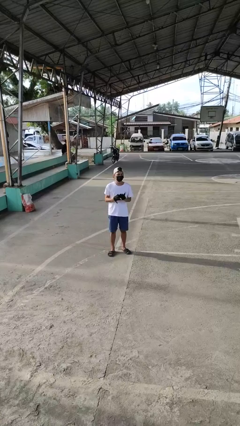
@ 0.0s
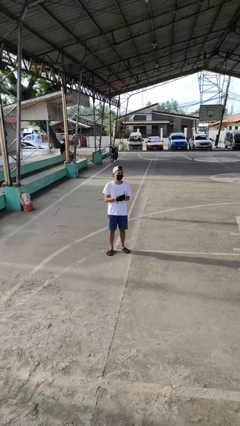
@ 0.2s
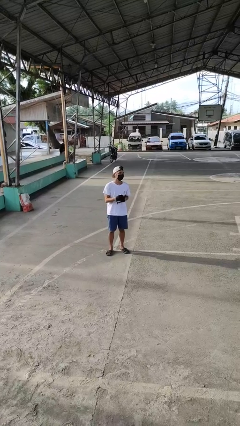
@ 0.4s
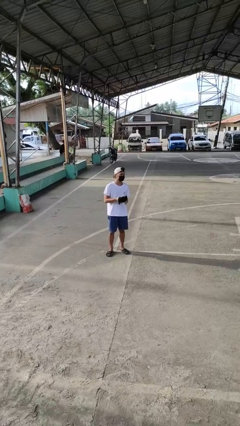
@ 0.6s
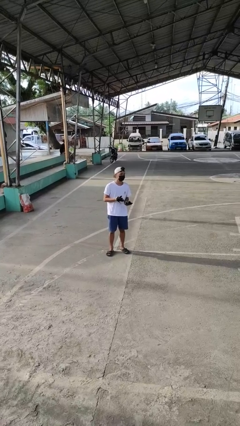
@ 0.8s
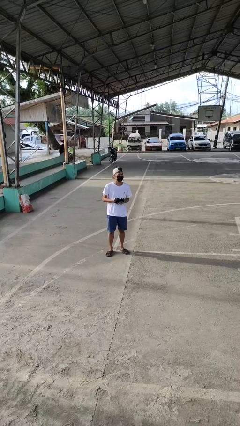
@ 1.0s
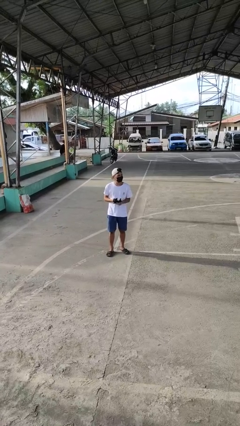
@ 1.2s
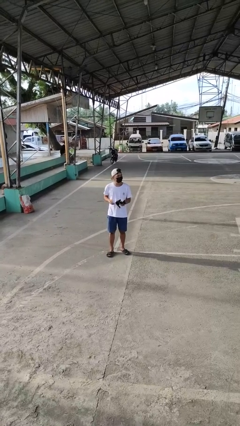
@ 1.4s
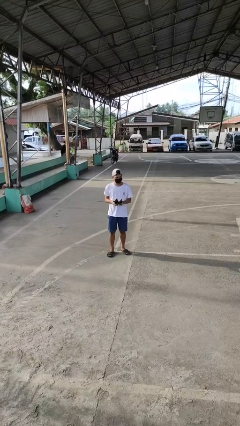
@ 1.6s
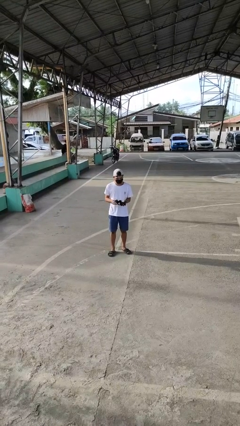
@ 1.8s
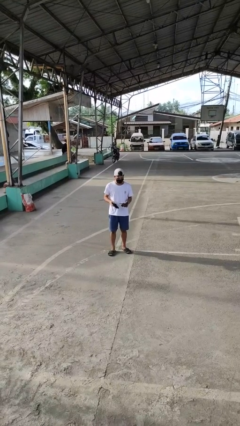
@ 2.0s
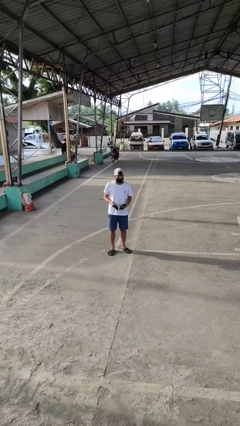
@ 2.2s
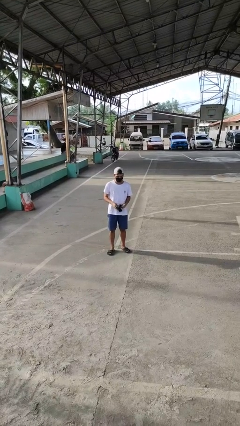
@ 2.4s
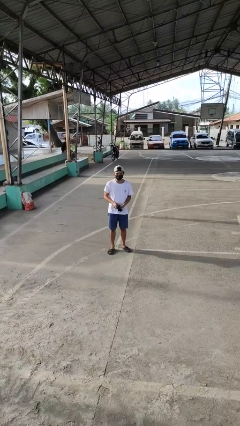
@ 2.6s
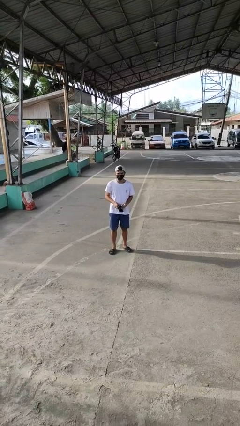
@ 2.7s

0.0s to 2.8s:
person takes off gloves

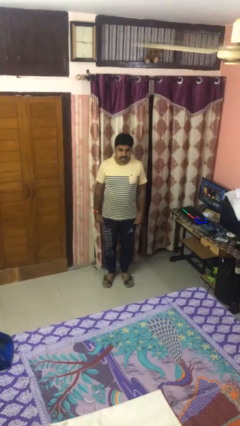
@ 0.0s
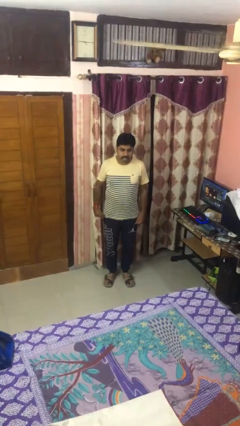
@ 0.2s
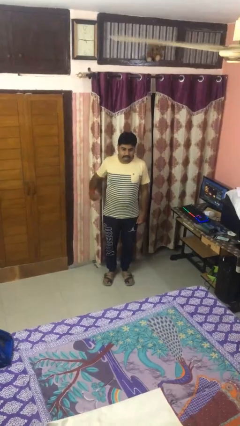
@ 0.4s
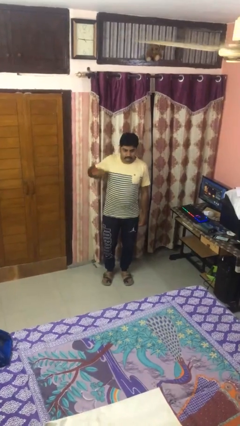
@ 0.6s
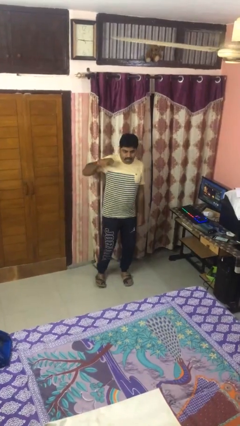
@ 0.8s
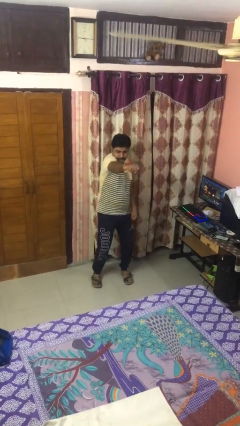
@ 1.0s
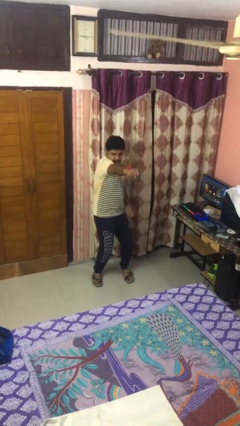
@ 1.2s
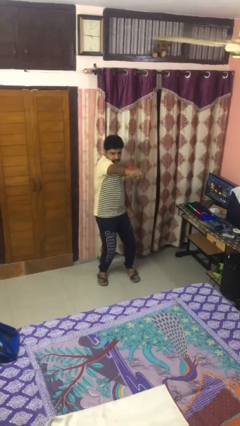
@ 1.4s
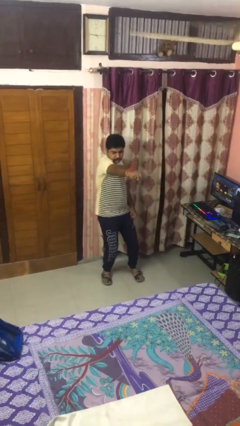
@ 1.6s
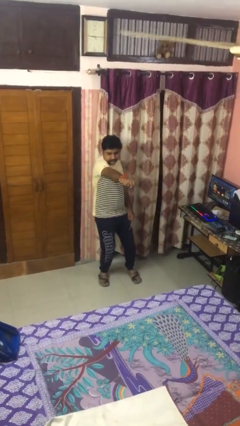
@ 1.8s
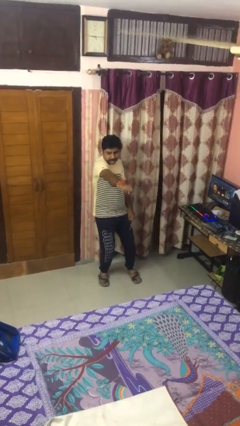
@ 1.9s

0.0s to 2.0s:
person punches

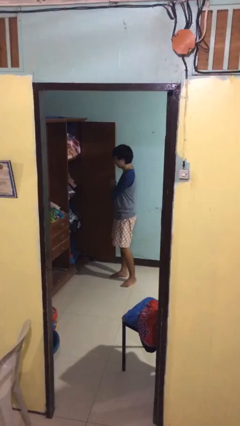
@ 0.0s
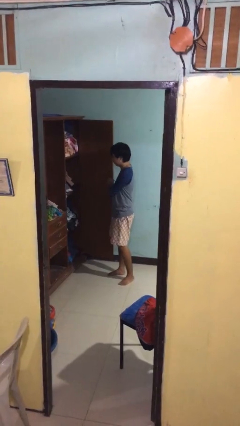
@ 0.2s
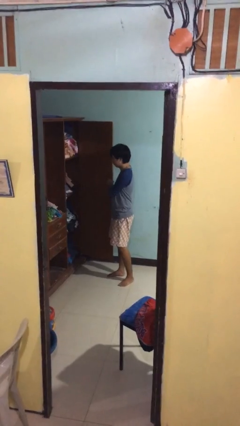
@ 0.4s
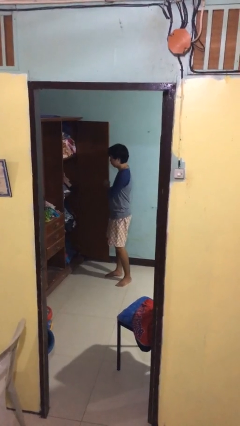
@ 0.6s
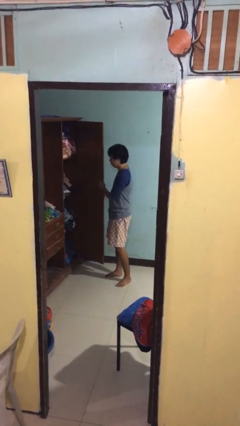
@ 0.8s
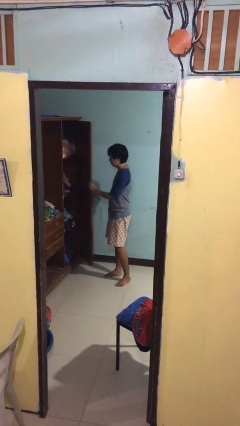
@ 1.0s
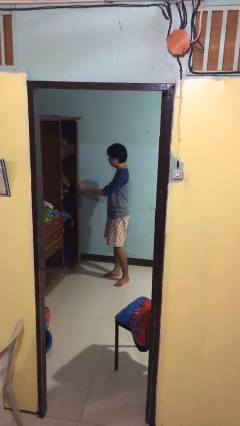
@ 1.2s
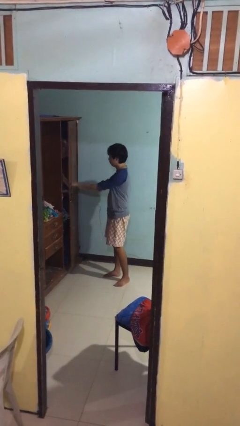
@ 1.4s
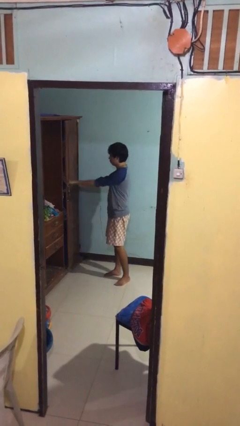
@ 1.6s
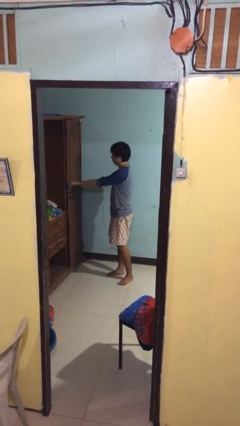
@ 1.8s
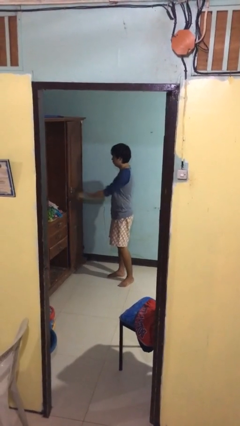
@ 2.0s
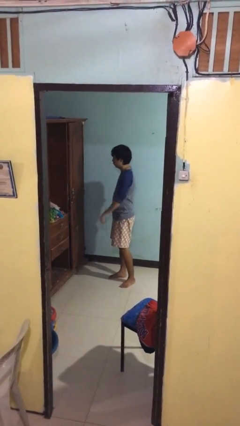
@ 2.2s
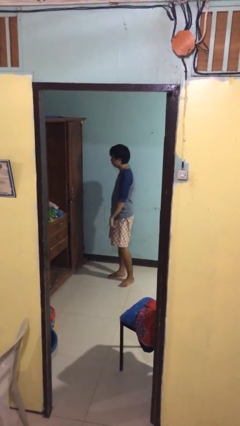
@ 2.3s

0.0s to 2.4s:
person closes closet door

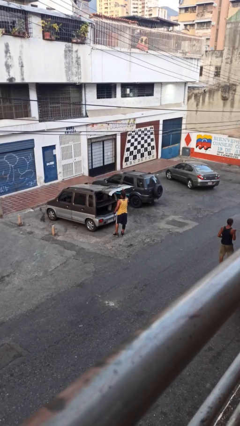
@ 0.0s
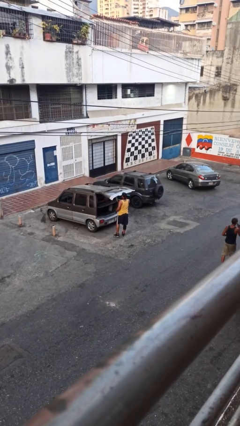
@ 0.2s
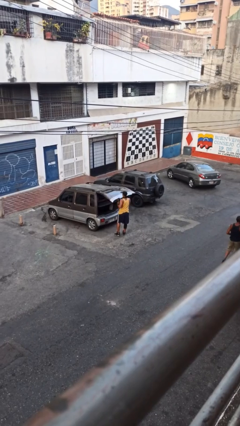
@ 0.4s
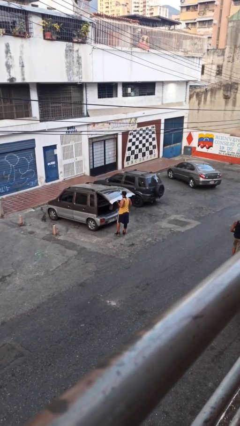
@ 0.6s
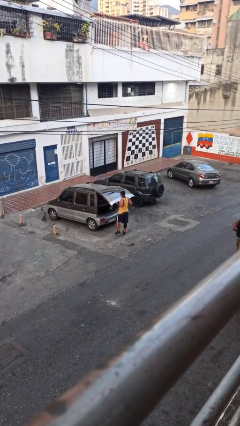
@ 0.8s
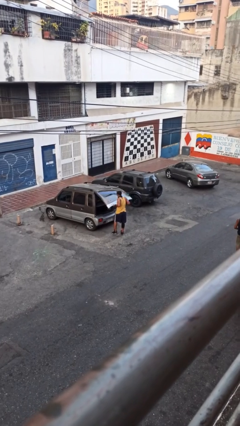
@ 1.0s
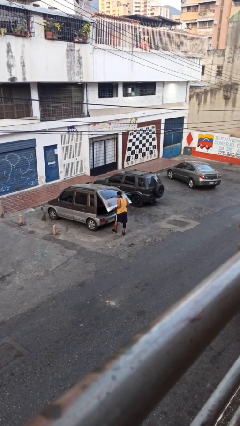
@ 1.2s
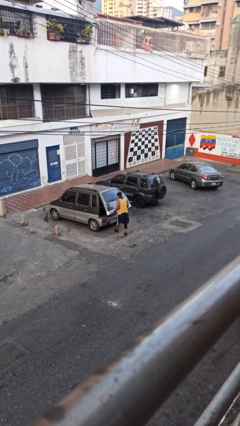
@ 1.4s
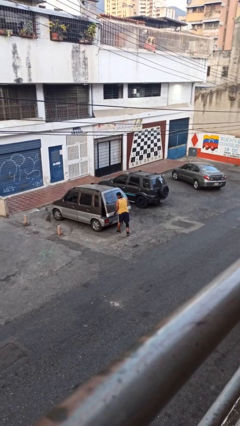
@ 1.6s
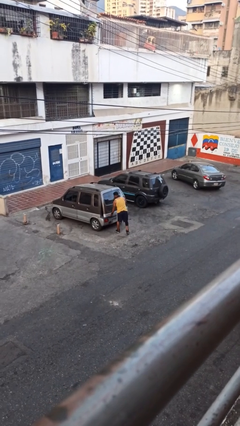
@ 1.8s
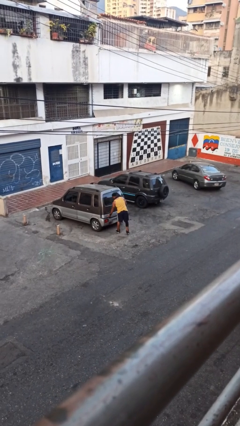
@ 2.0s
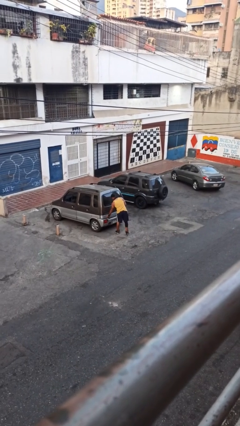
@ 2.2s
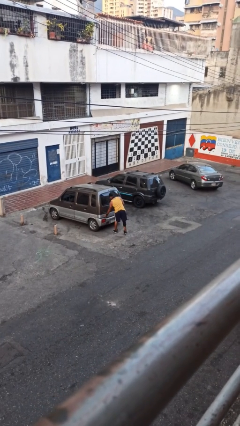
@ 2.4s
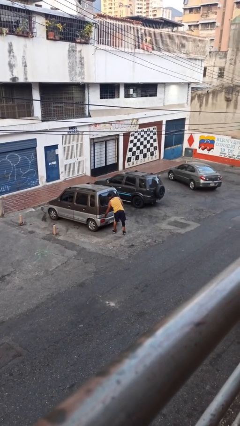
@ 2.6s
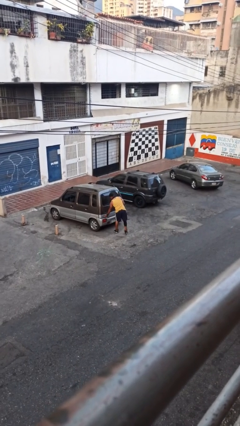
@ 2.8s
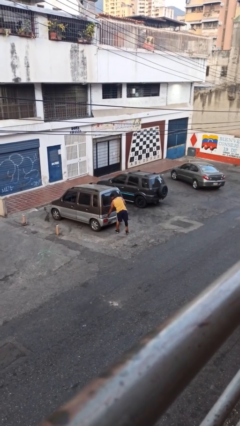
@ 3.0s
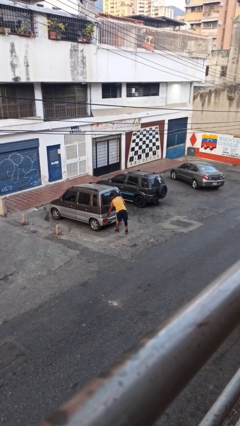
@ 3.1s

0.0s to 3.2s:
person closes car trunk

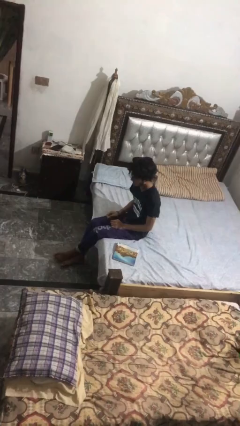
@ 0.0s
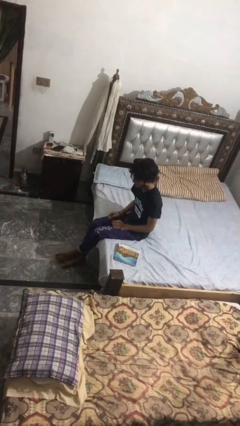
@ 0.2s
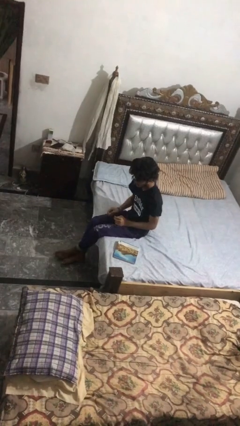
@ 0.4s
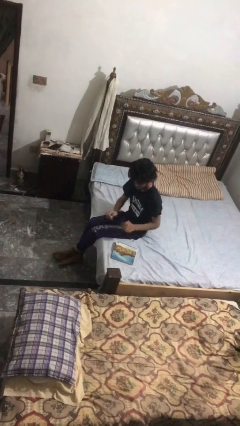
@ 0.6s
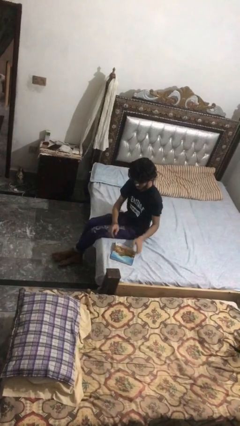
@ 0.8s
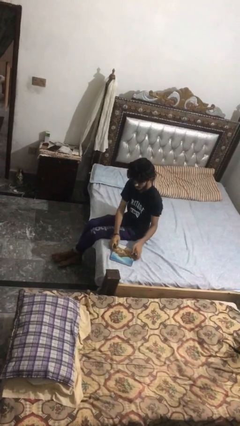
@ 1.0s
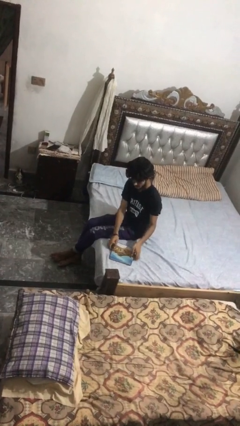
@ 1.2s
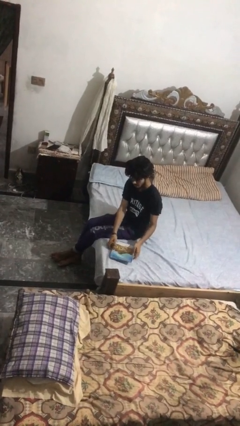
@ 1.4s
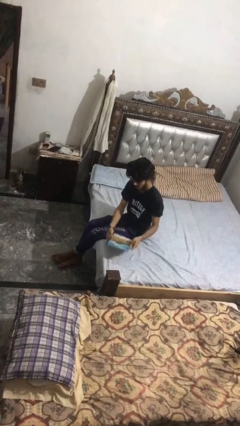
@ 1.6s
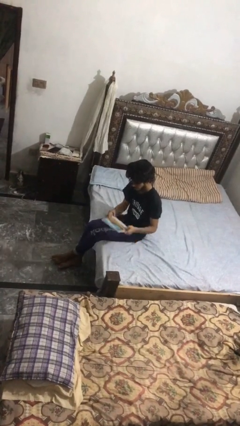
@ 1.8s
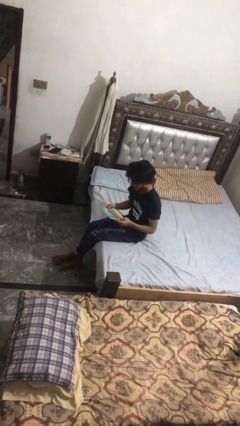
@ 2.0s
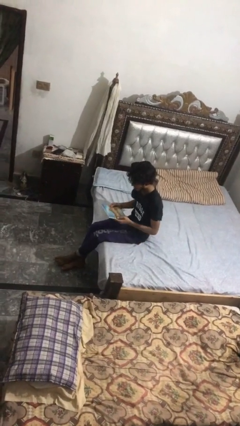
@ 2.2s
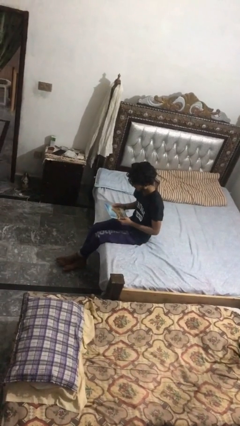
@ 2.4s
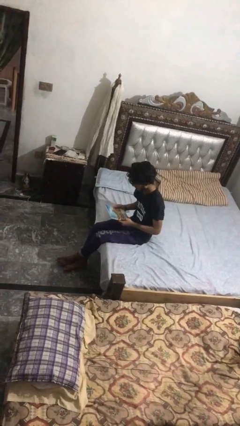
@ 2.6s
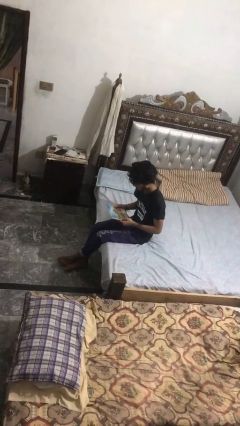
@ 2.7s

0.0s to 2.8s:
person picks up object from bed

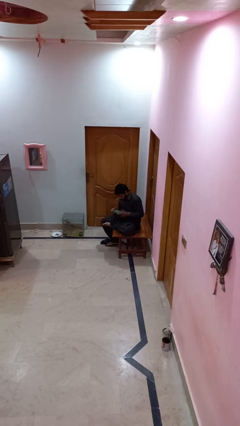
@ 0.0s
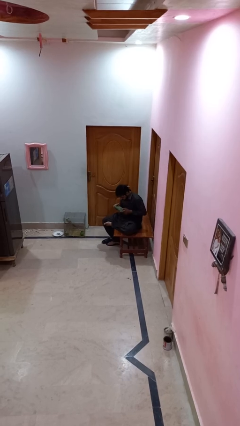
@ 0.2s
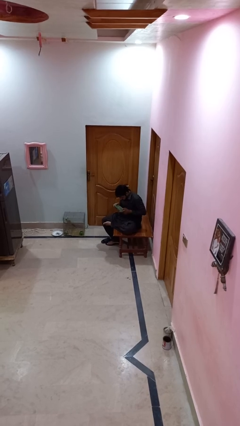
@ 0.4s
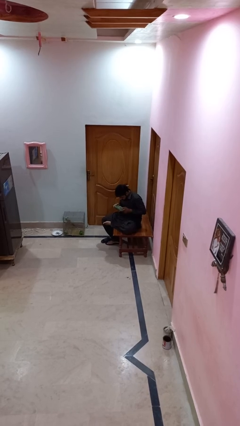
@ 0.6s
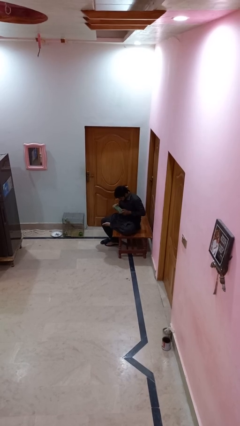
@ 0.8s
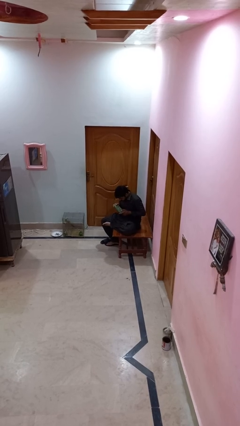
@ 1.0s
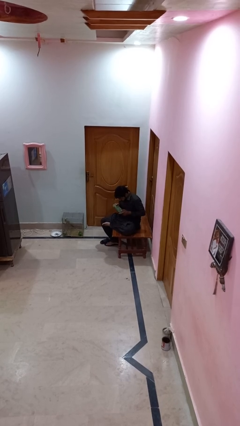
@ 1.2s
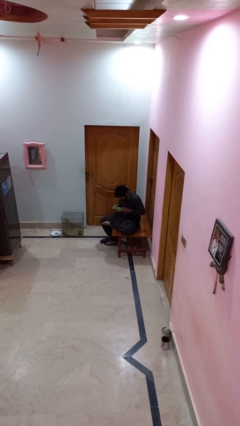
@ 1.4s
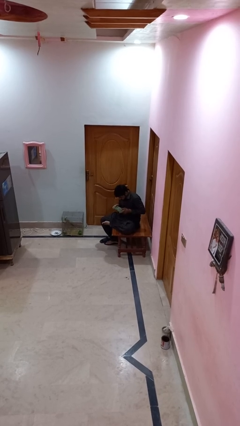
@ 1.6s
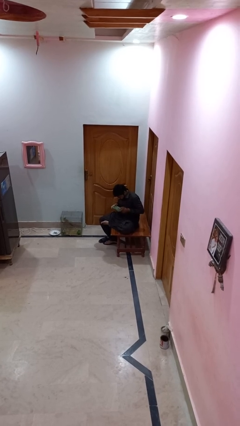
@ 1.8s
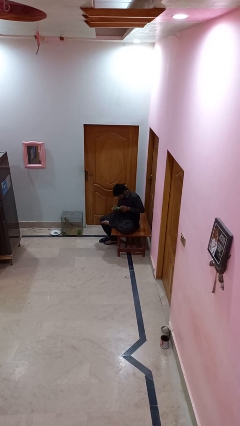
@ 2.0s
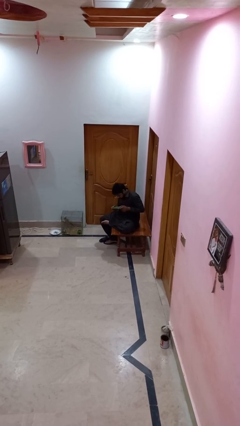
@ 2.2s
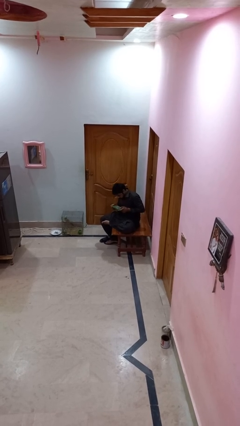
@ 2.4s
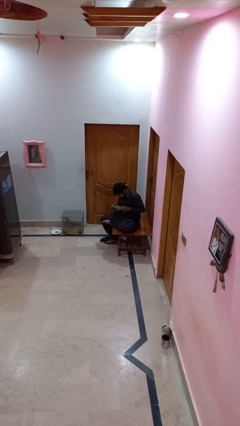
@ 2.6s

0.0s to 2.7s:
person interacts with handheld game

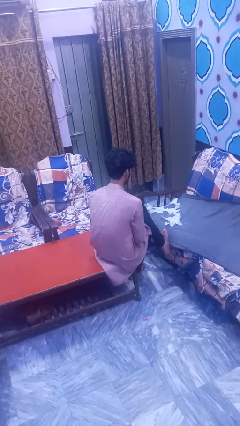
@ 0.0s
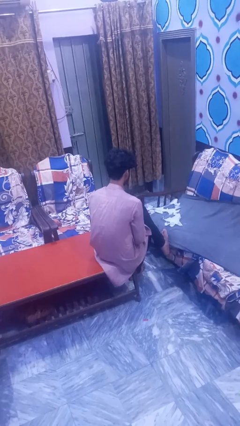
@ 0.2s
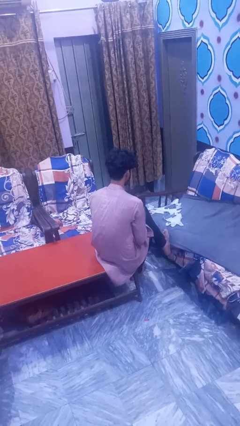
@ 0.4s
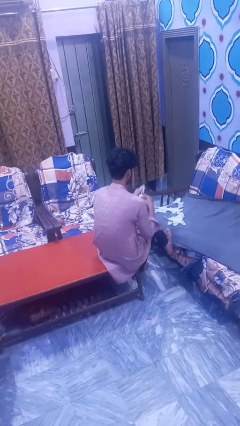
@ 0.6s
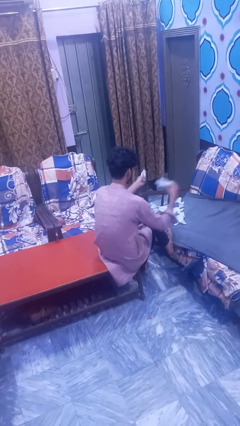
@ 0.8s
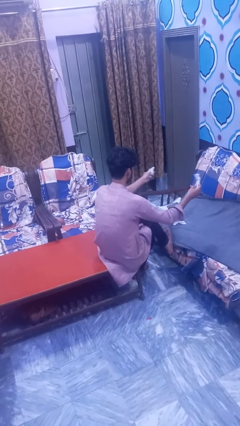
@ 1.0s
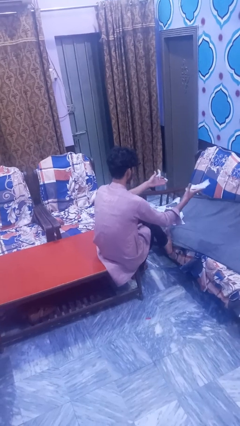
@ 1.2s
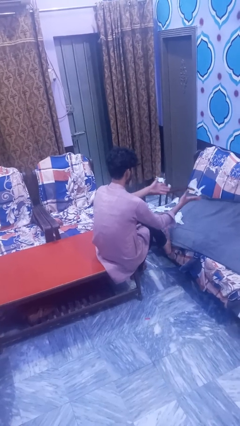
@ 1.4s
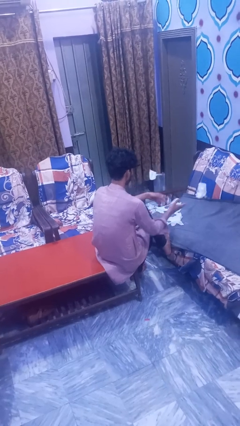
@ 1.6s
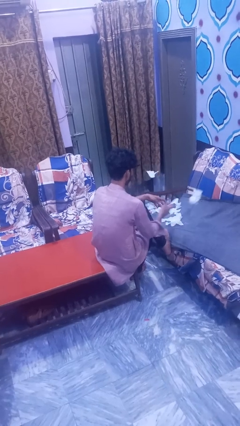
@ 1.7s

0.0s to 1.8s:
person tears paper
